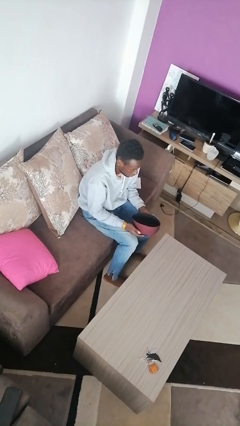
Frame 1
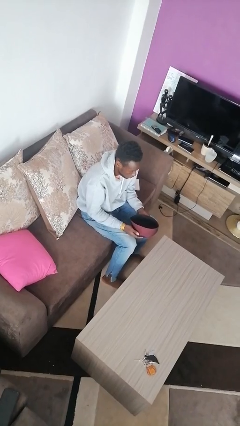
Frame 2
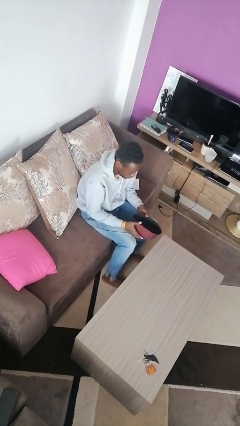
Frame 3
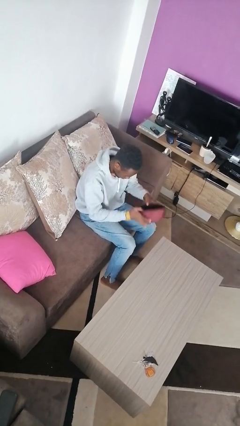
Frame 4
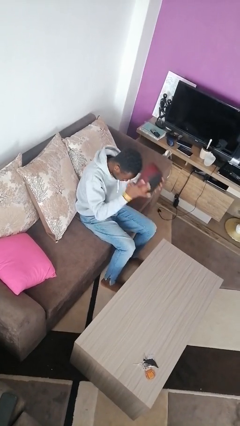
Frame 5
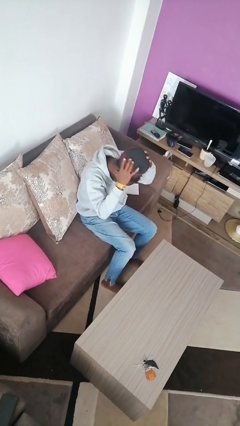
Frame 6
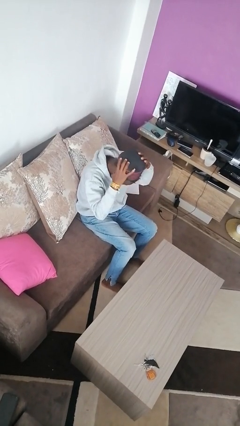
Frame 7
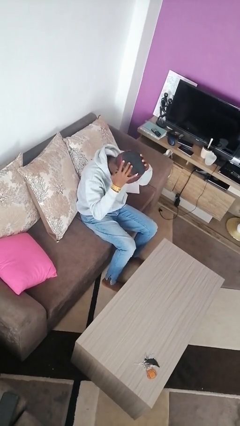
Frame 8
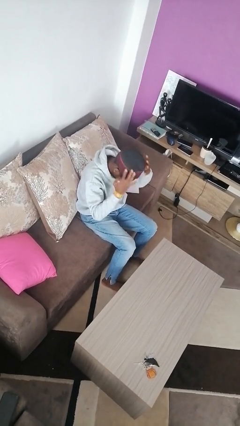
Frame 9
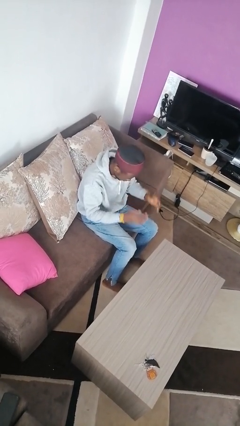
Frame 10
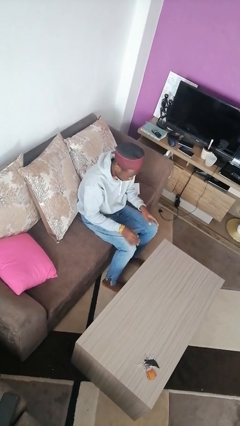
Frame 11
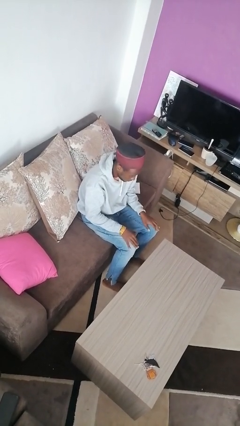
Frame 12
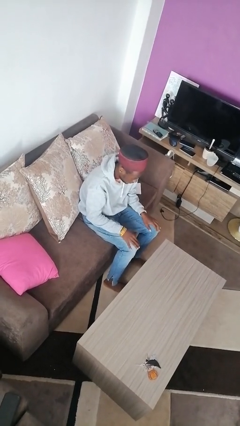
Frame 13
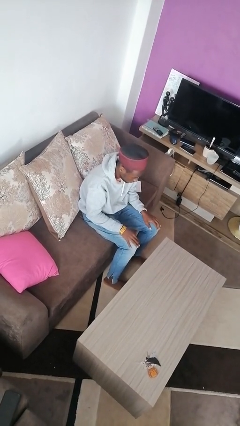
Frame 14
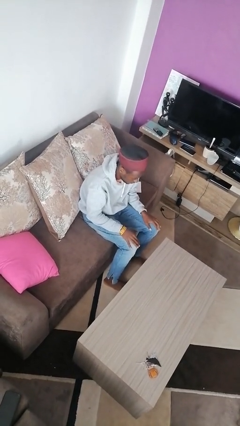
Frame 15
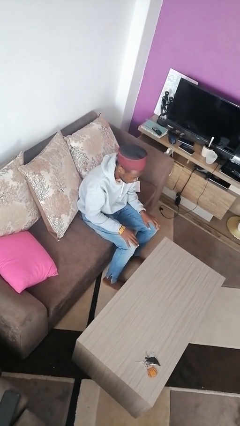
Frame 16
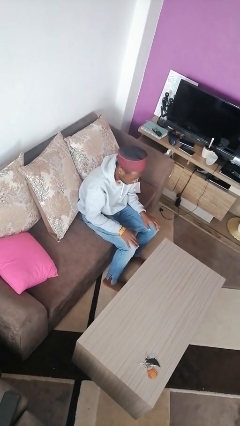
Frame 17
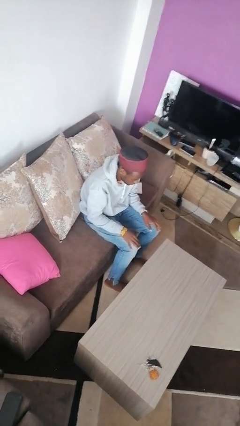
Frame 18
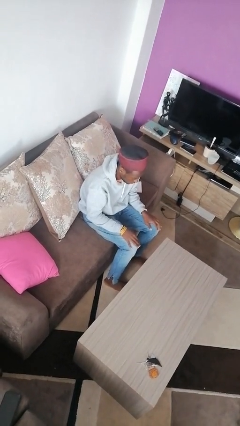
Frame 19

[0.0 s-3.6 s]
person puts on hat

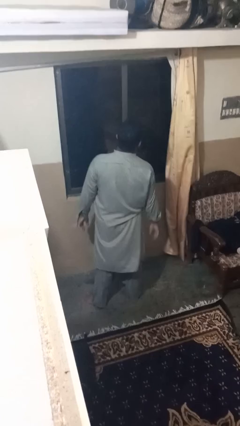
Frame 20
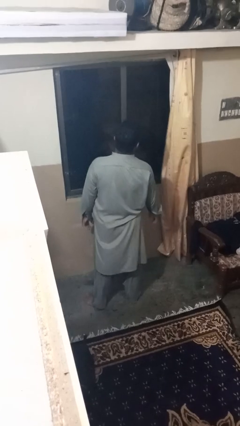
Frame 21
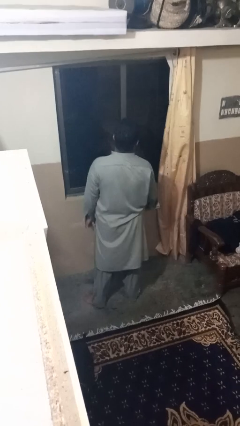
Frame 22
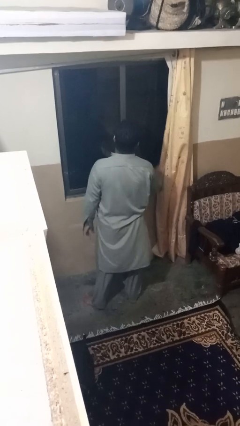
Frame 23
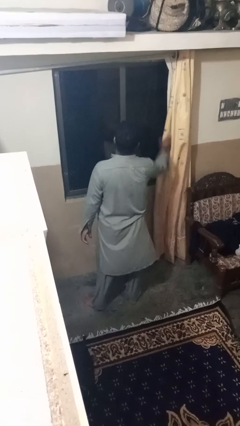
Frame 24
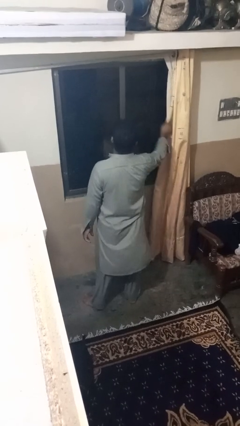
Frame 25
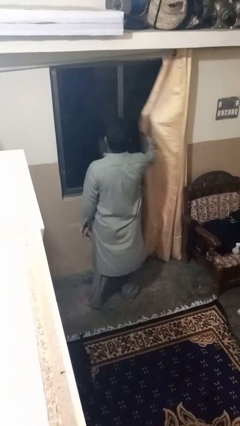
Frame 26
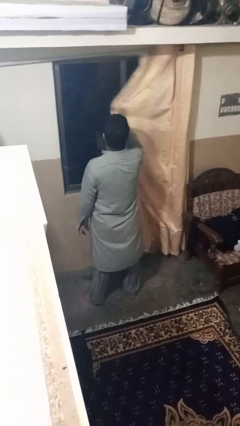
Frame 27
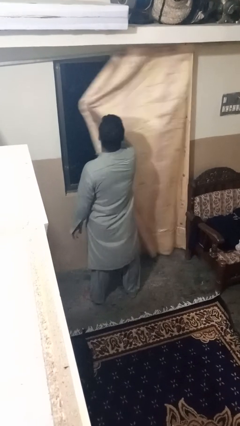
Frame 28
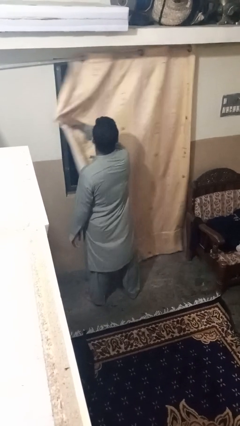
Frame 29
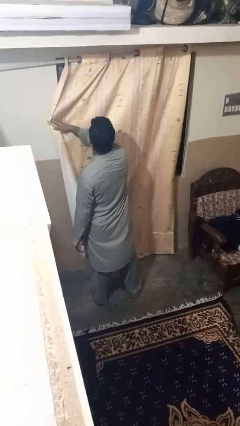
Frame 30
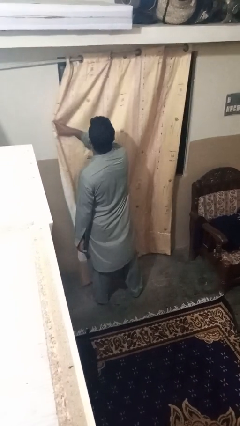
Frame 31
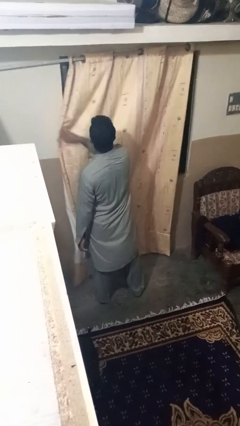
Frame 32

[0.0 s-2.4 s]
person closes curtains

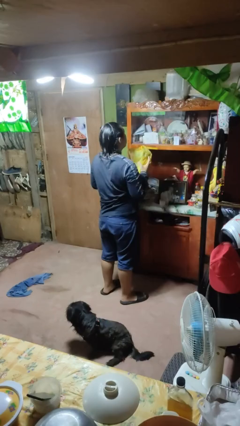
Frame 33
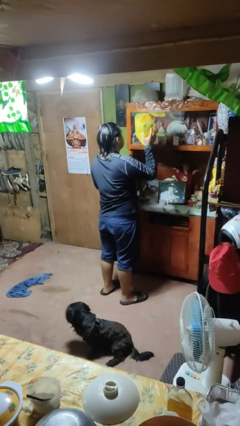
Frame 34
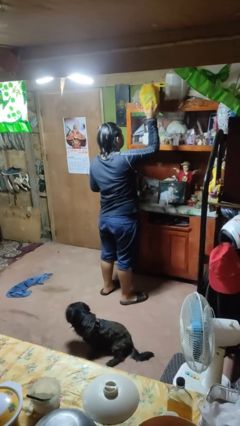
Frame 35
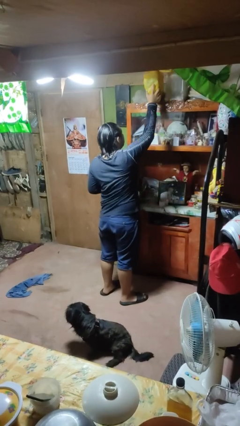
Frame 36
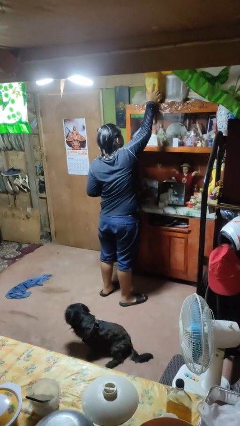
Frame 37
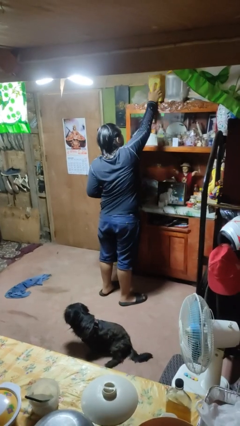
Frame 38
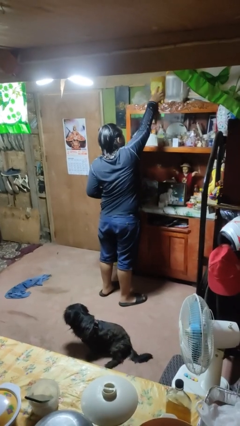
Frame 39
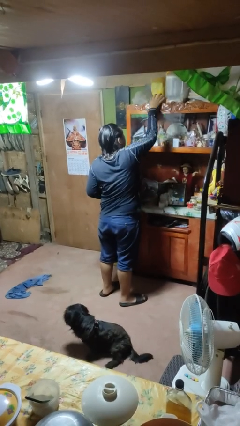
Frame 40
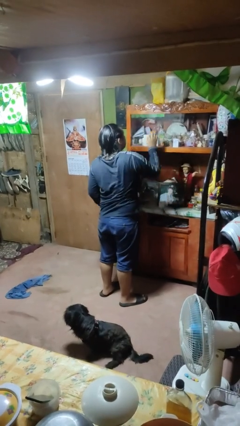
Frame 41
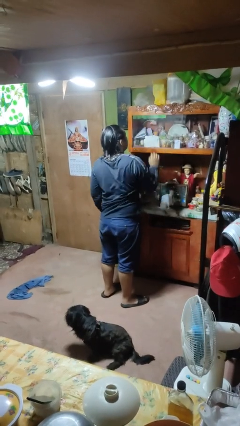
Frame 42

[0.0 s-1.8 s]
person puts down object on shelf

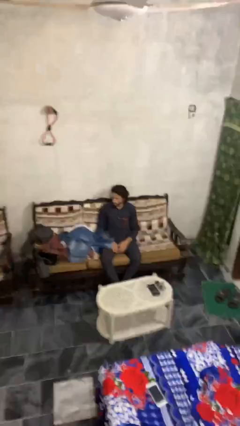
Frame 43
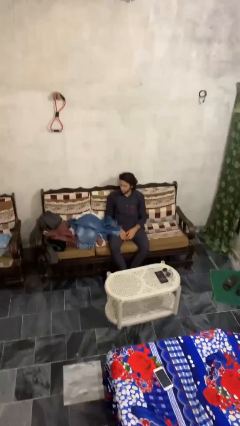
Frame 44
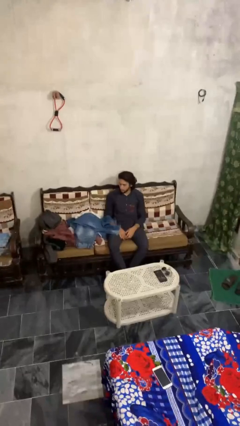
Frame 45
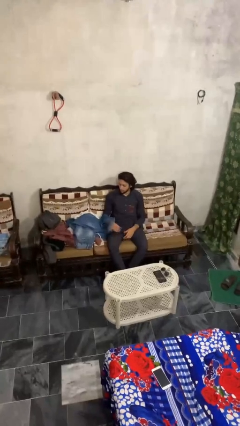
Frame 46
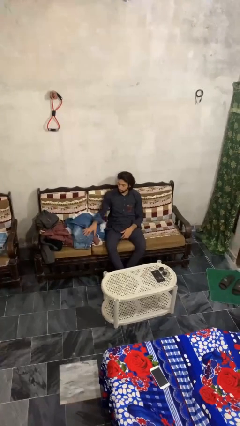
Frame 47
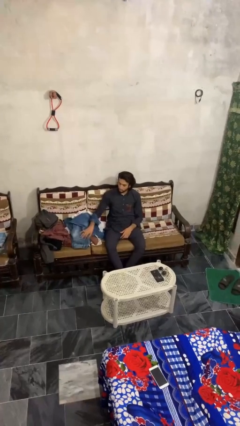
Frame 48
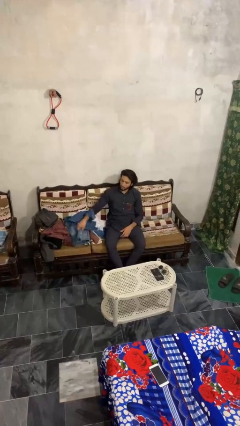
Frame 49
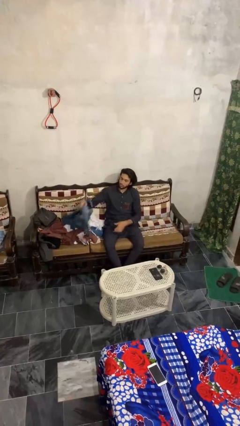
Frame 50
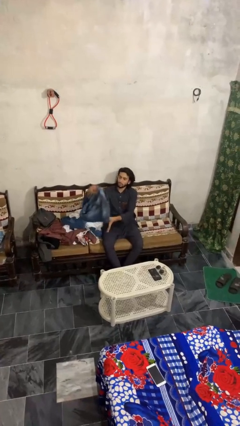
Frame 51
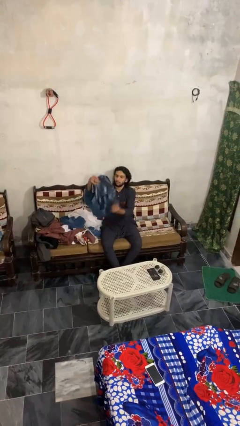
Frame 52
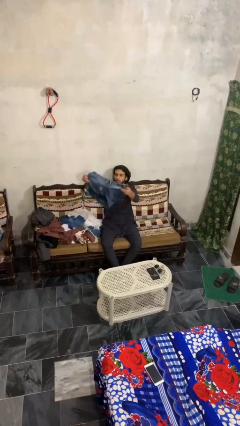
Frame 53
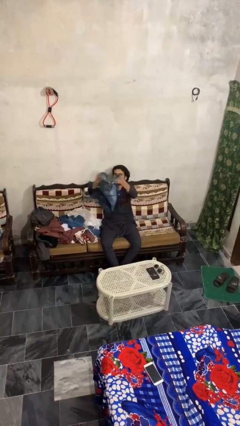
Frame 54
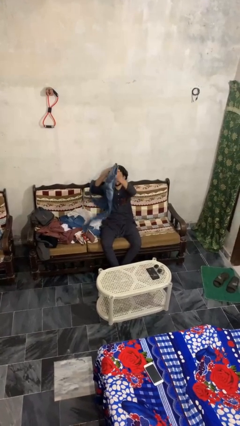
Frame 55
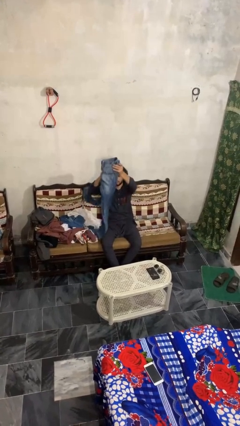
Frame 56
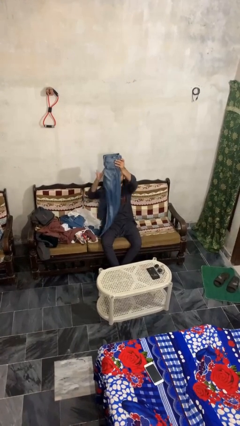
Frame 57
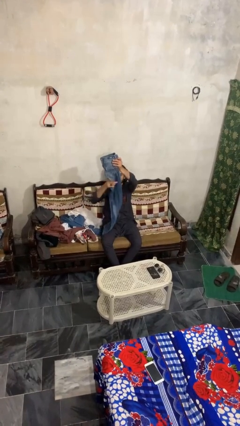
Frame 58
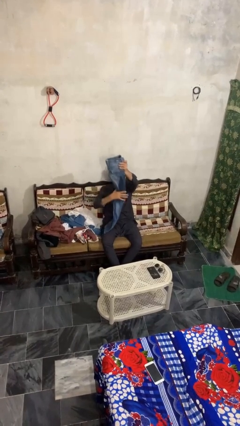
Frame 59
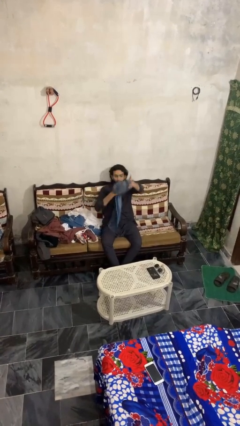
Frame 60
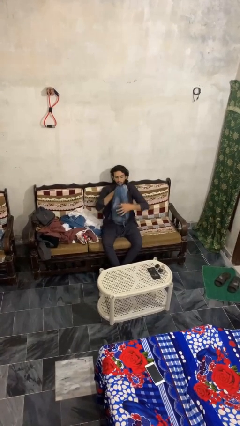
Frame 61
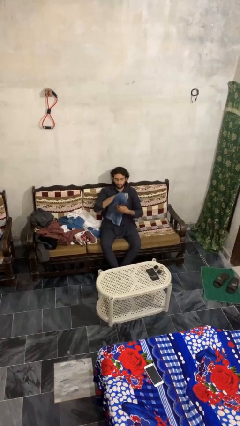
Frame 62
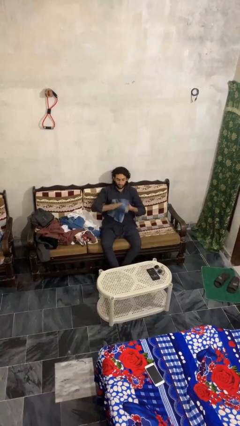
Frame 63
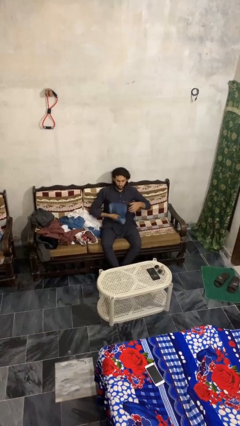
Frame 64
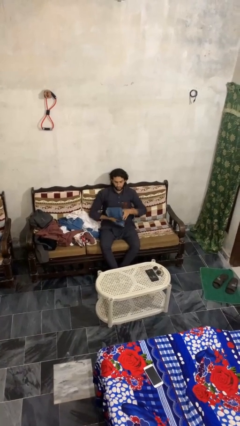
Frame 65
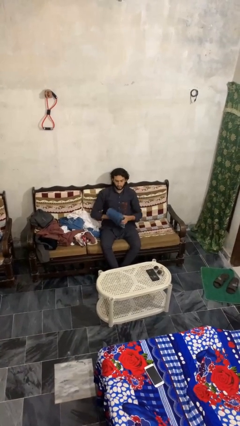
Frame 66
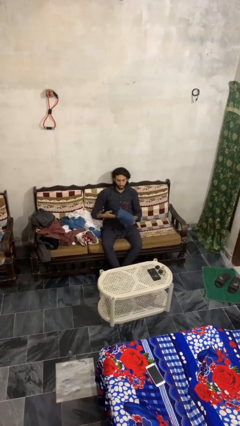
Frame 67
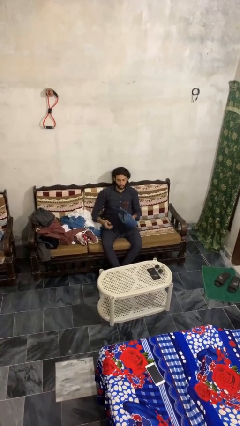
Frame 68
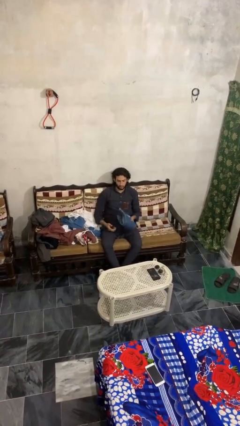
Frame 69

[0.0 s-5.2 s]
person folds pants

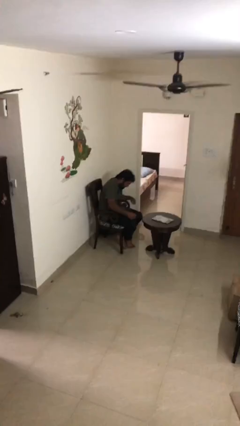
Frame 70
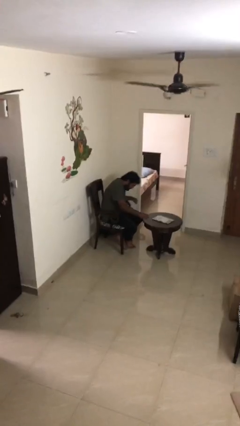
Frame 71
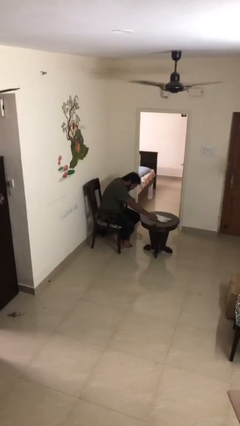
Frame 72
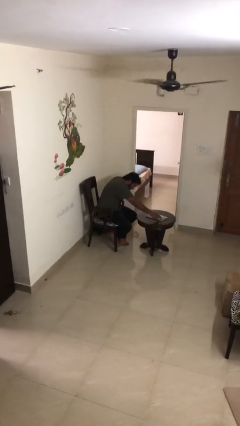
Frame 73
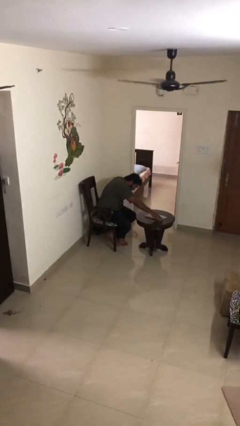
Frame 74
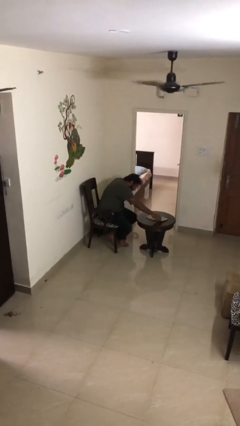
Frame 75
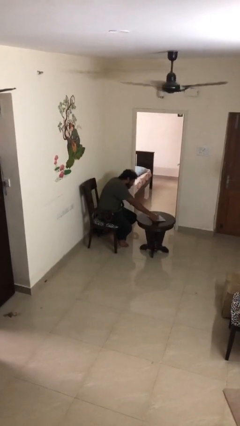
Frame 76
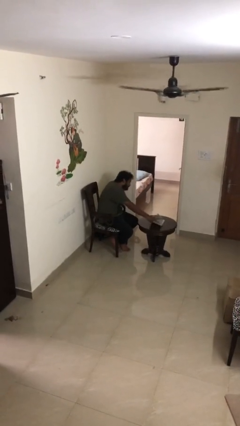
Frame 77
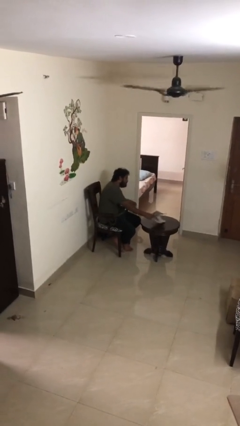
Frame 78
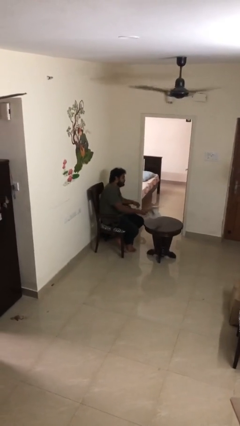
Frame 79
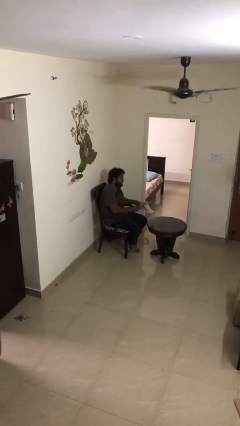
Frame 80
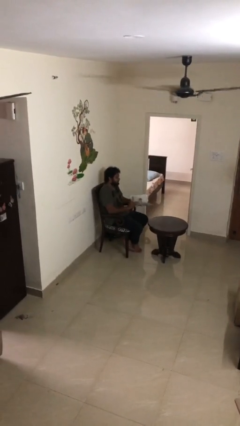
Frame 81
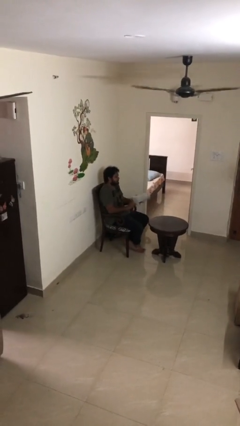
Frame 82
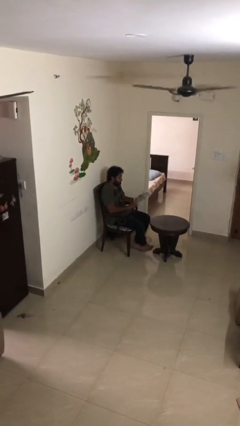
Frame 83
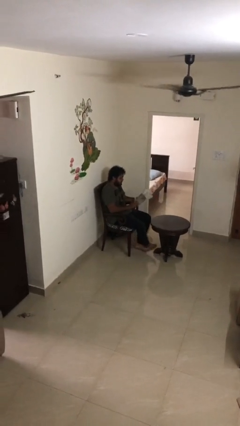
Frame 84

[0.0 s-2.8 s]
person picks up object from table

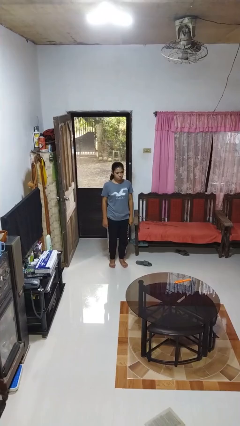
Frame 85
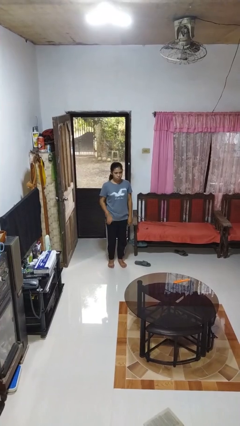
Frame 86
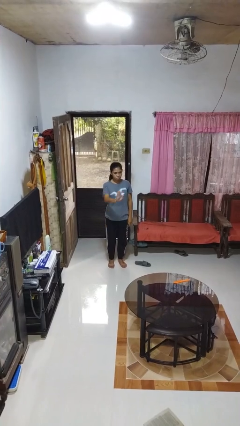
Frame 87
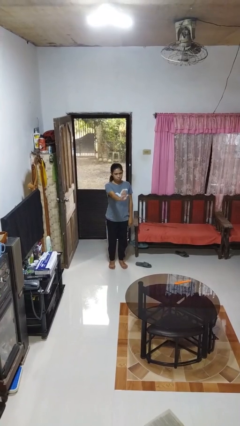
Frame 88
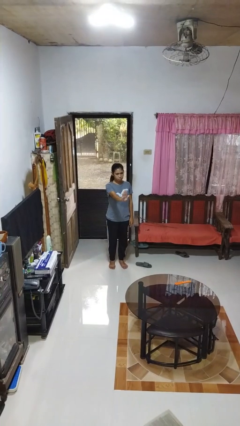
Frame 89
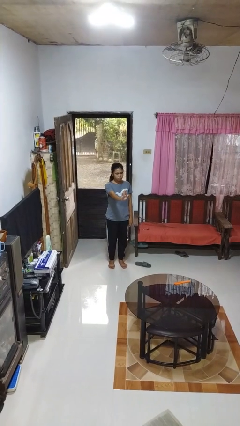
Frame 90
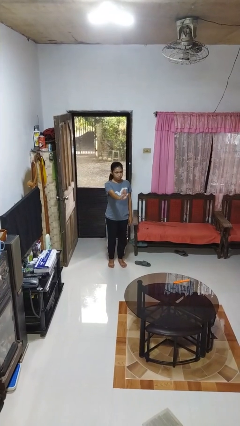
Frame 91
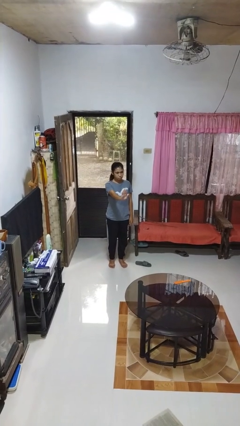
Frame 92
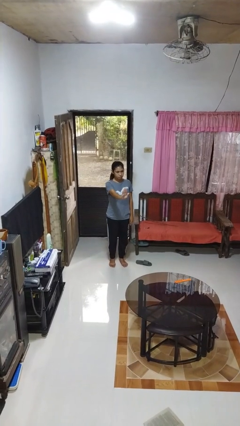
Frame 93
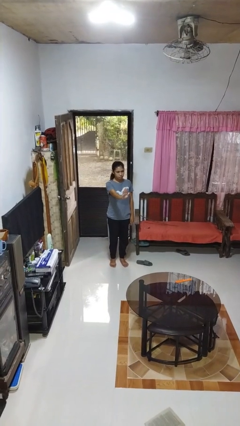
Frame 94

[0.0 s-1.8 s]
person gestures stop
